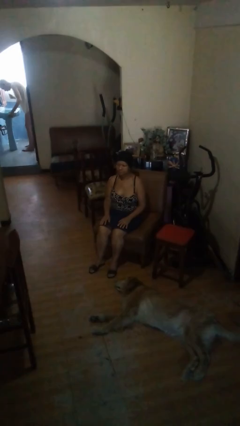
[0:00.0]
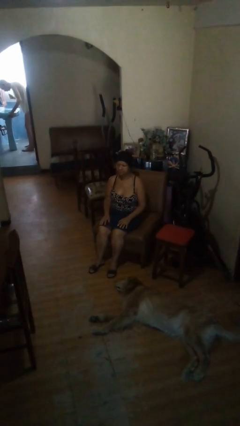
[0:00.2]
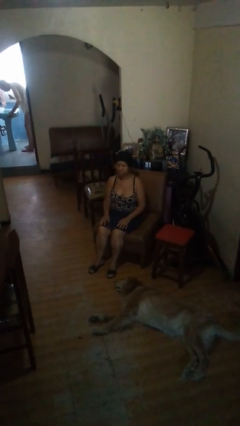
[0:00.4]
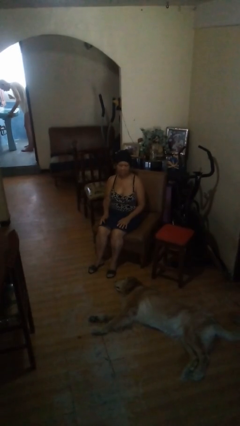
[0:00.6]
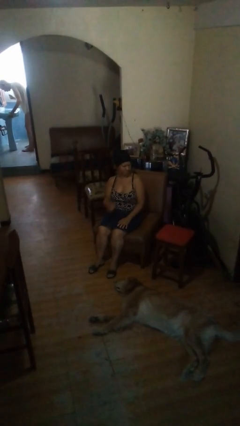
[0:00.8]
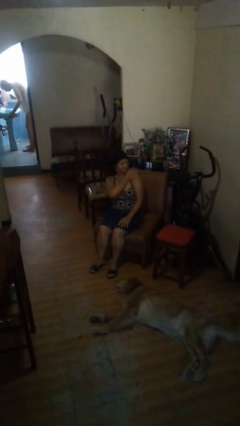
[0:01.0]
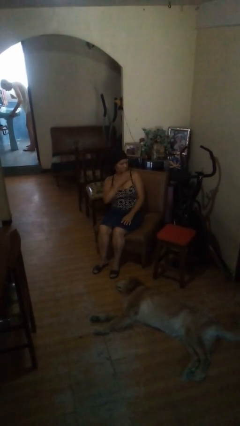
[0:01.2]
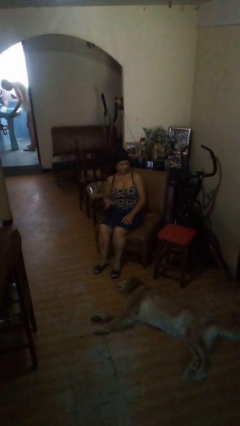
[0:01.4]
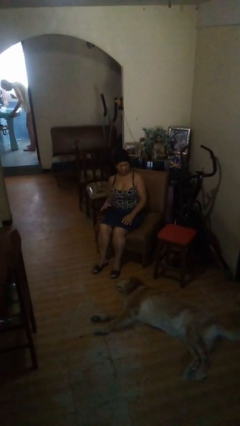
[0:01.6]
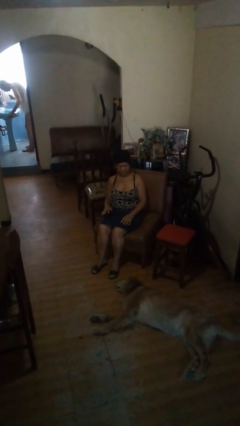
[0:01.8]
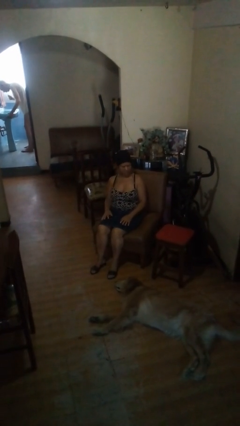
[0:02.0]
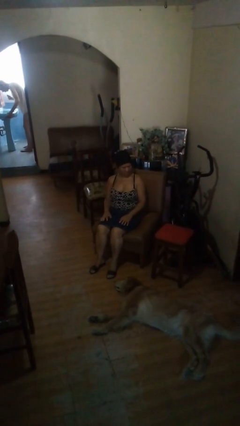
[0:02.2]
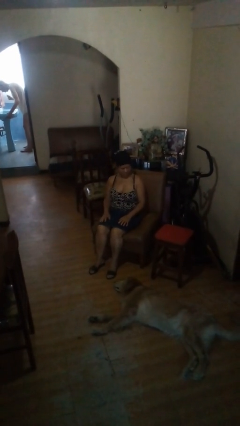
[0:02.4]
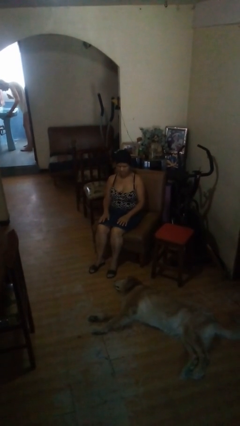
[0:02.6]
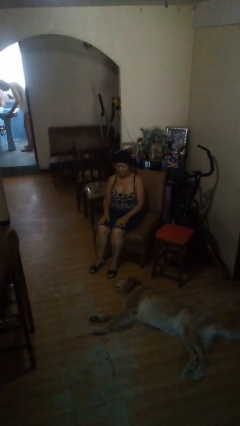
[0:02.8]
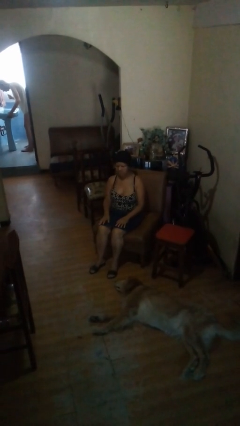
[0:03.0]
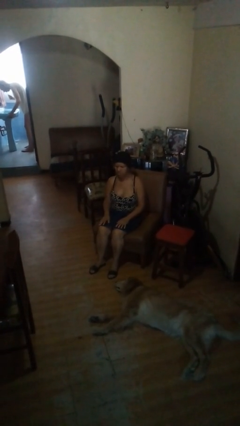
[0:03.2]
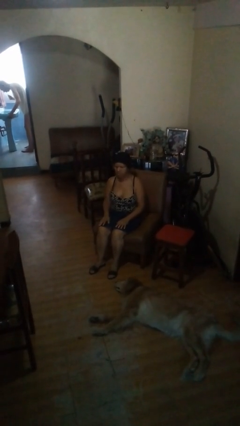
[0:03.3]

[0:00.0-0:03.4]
person swats bug

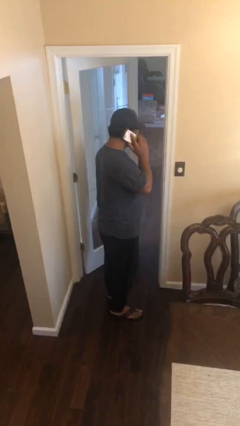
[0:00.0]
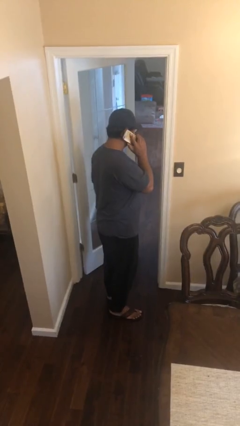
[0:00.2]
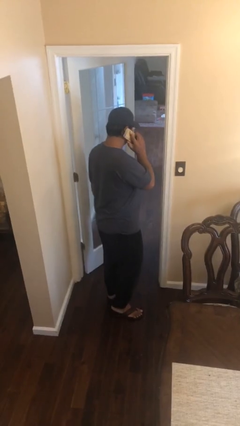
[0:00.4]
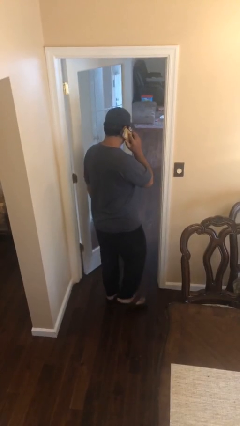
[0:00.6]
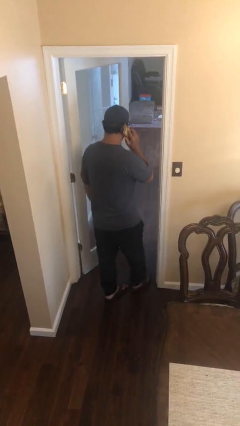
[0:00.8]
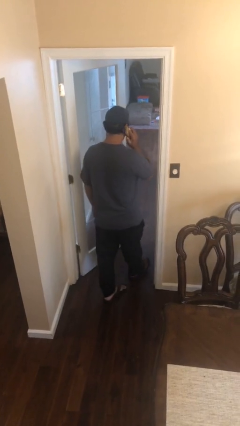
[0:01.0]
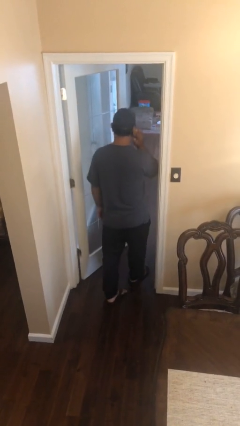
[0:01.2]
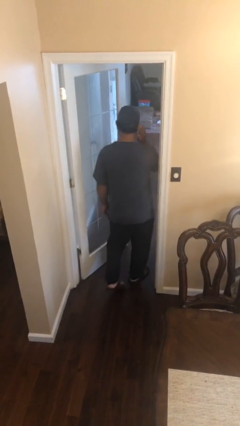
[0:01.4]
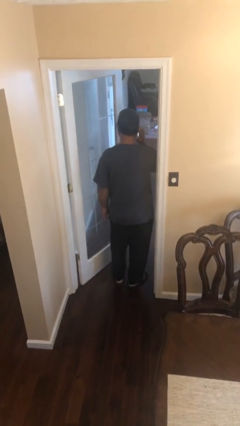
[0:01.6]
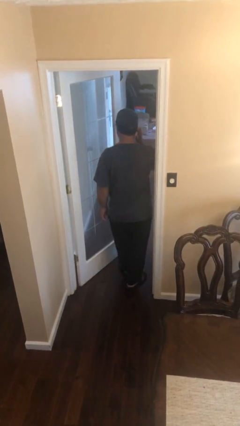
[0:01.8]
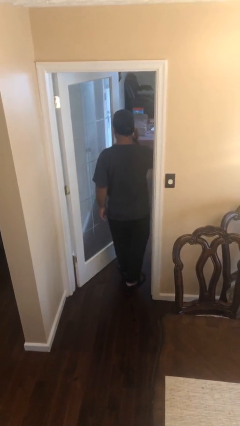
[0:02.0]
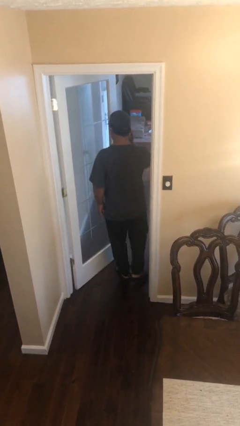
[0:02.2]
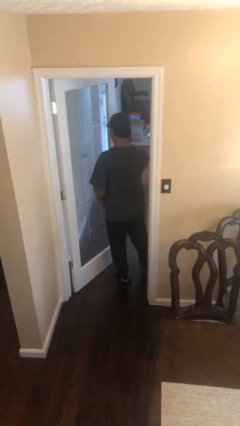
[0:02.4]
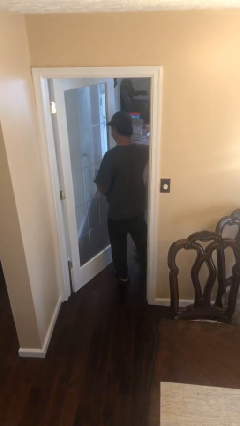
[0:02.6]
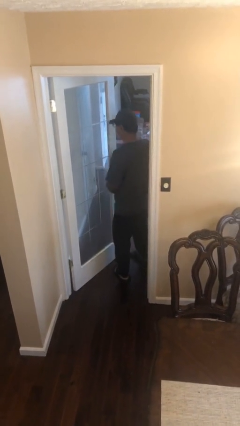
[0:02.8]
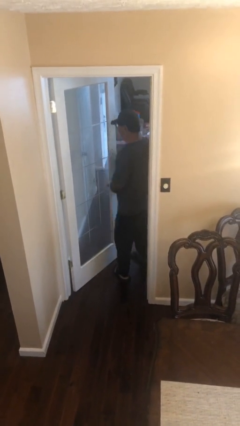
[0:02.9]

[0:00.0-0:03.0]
person exits scene through structure

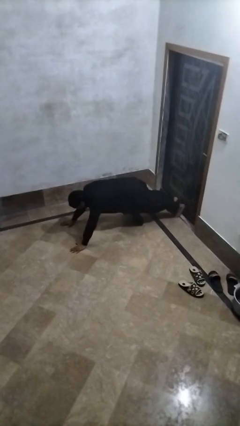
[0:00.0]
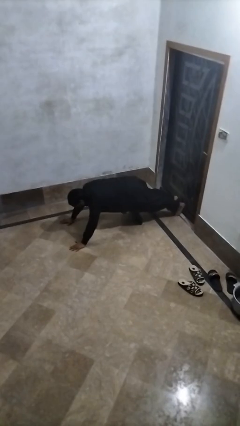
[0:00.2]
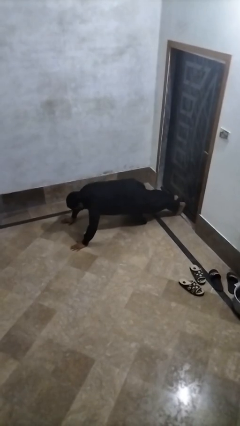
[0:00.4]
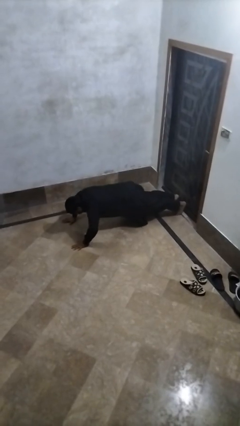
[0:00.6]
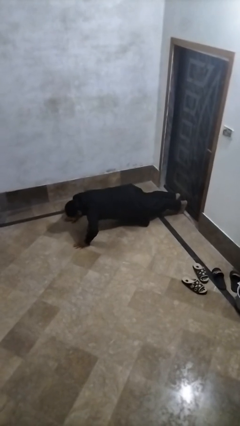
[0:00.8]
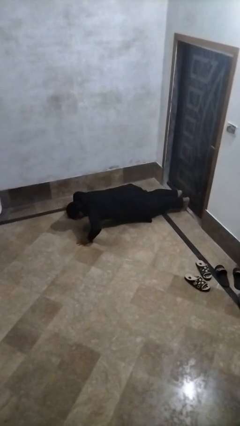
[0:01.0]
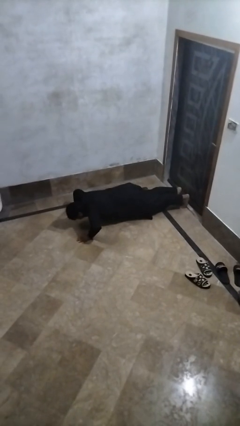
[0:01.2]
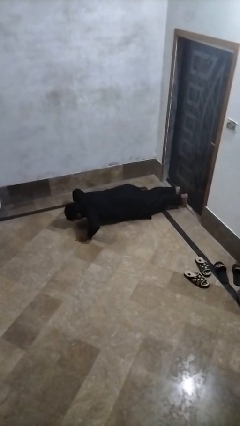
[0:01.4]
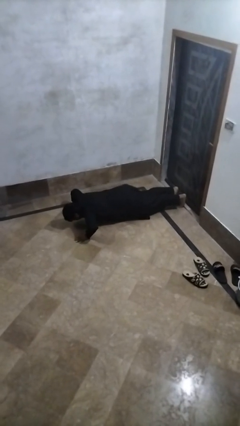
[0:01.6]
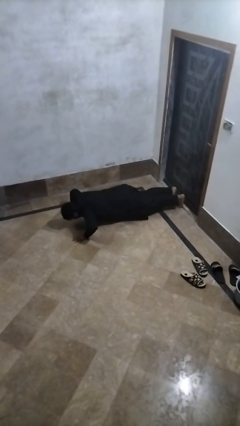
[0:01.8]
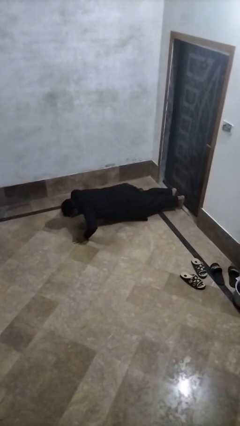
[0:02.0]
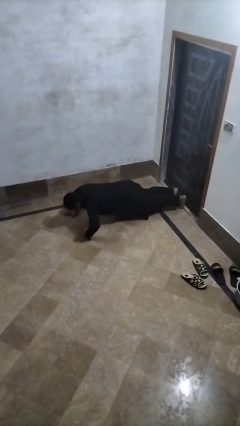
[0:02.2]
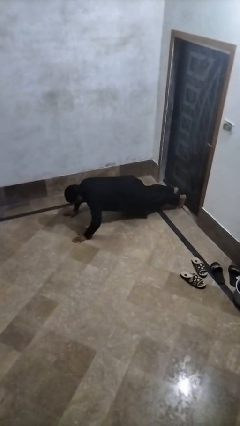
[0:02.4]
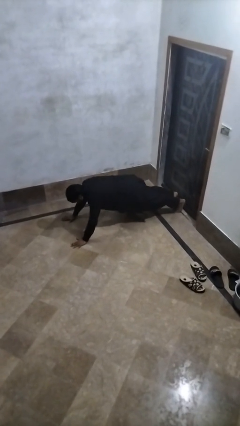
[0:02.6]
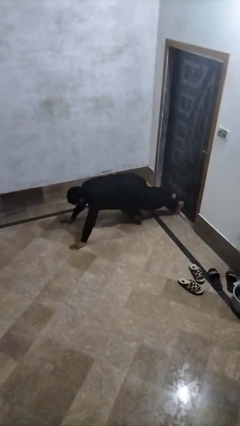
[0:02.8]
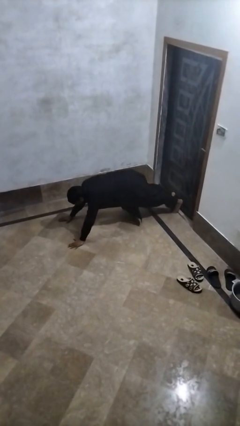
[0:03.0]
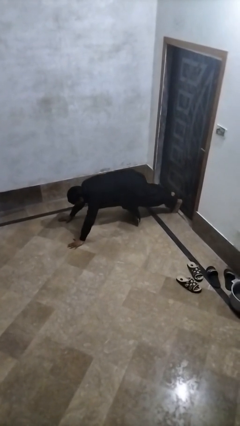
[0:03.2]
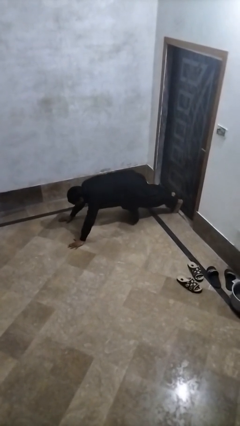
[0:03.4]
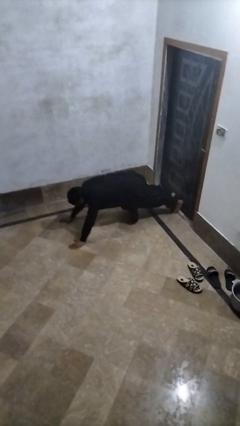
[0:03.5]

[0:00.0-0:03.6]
person exercises with pushup

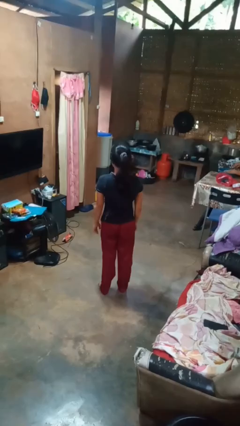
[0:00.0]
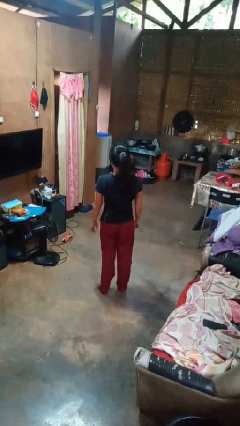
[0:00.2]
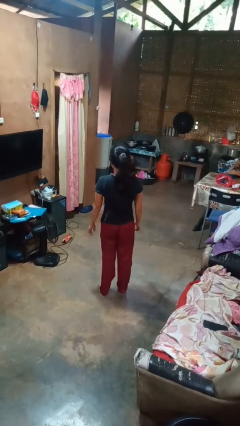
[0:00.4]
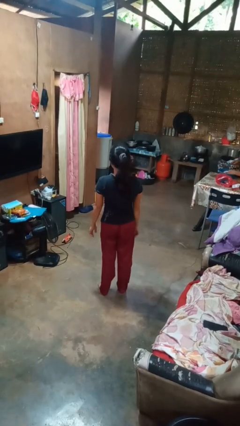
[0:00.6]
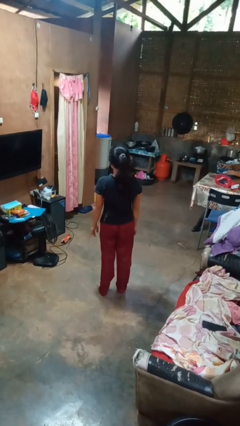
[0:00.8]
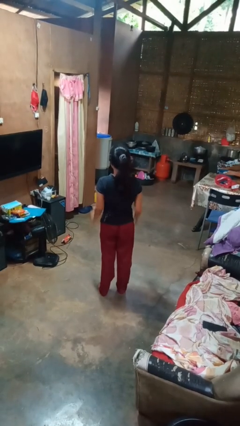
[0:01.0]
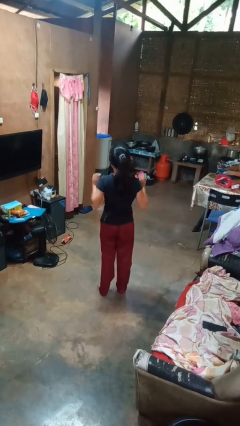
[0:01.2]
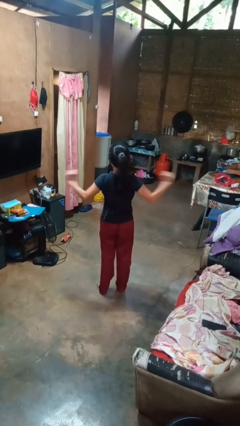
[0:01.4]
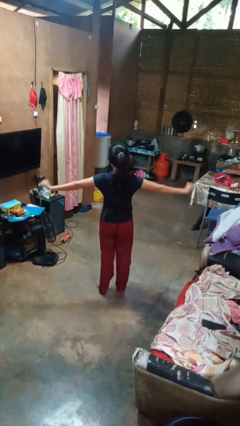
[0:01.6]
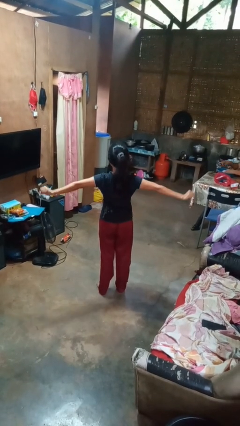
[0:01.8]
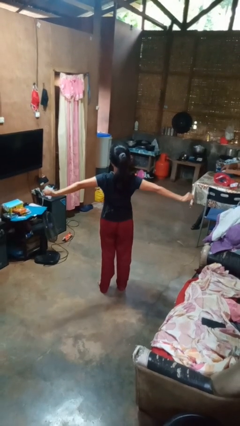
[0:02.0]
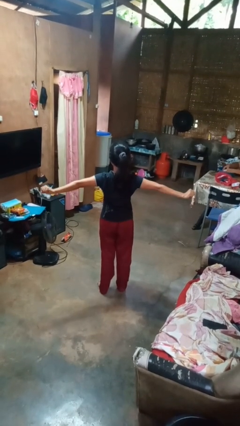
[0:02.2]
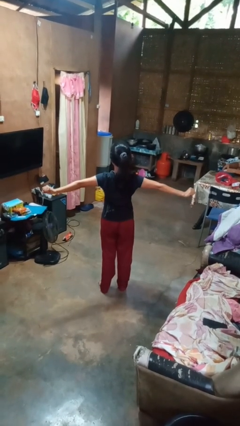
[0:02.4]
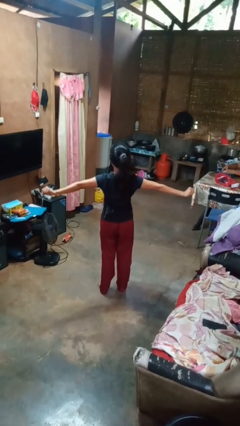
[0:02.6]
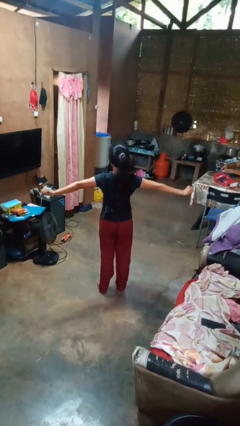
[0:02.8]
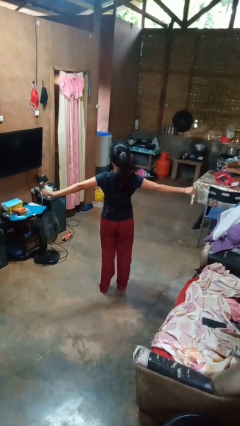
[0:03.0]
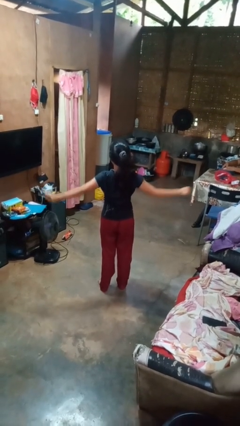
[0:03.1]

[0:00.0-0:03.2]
person stretches arms to side

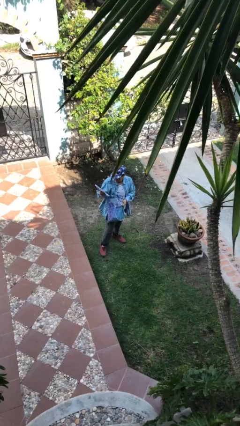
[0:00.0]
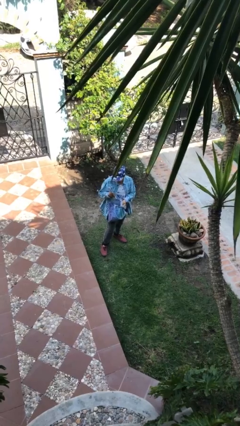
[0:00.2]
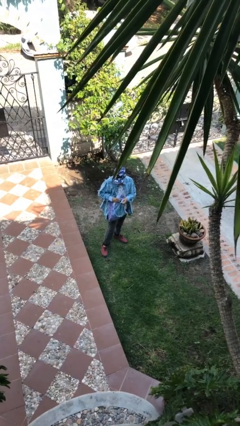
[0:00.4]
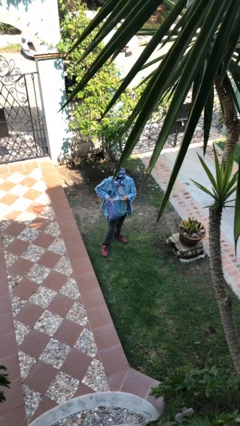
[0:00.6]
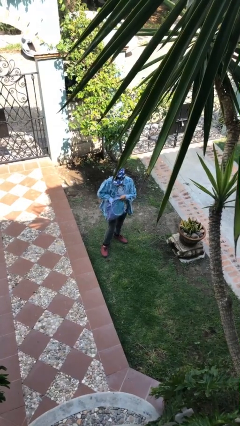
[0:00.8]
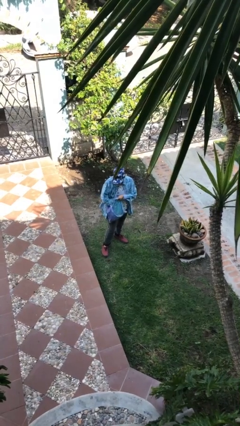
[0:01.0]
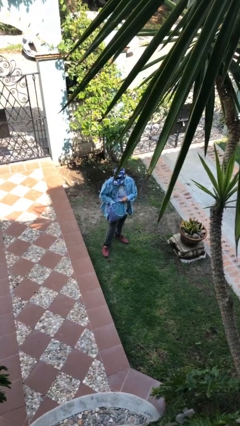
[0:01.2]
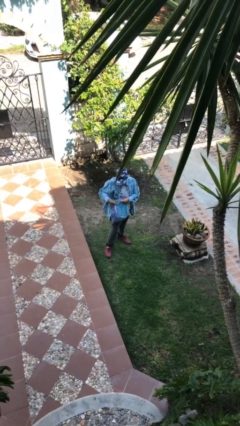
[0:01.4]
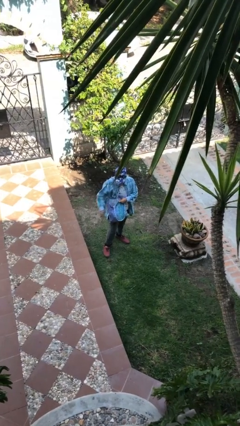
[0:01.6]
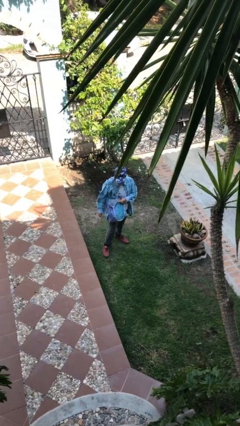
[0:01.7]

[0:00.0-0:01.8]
person puts object into purse

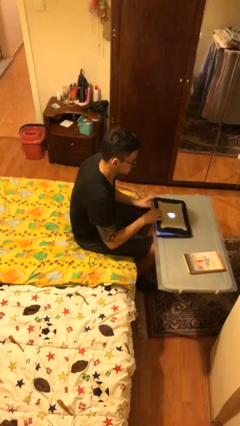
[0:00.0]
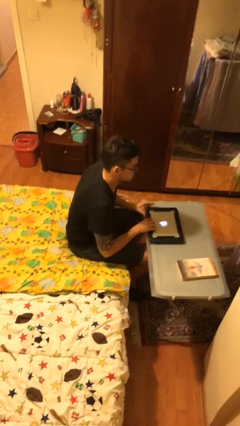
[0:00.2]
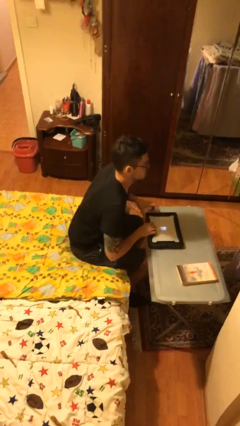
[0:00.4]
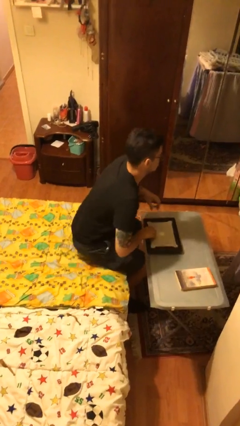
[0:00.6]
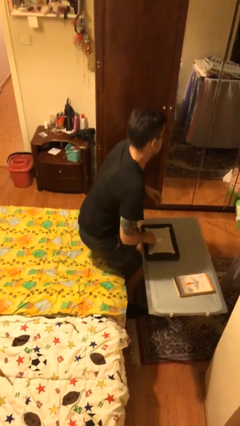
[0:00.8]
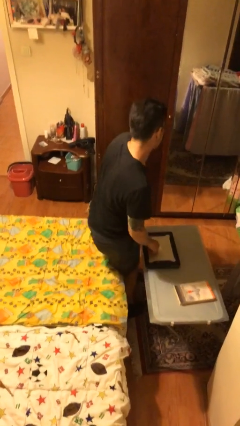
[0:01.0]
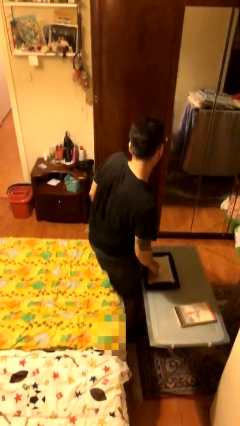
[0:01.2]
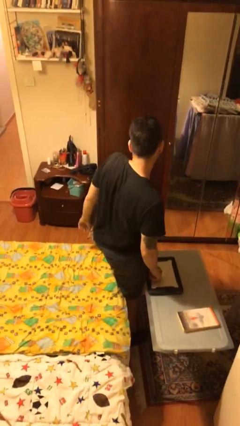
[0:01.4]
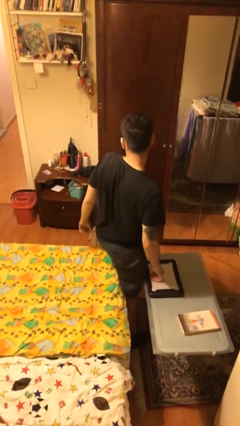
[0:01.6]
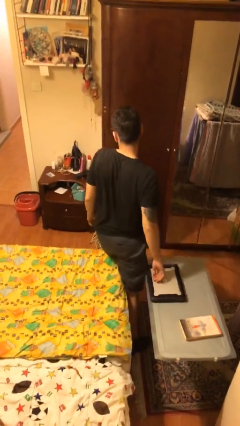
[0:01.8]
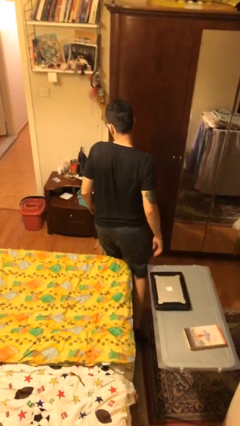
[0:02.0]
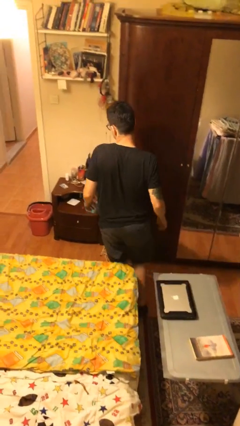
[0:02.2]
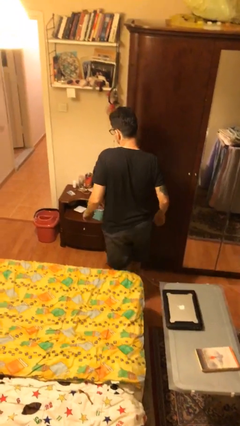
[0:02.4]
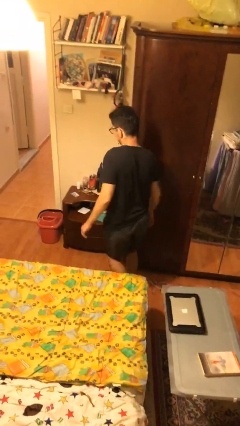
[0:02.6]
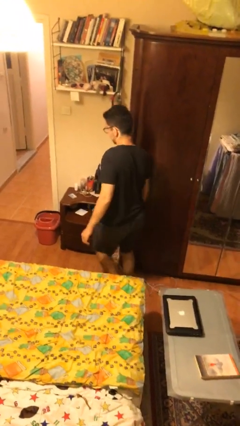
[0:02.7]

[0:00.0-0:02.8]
person stands up
